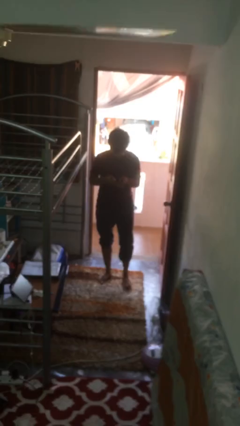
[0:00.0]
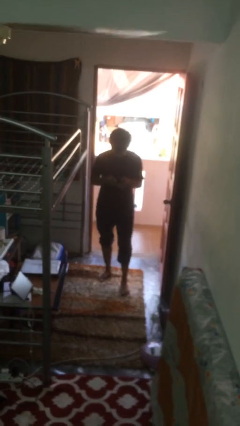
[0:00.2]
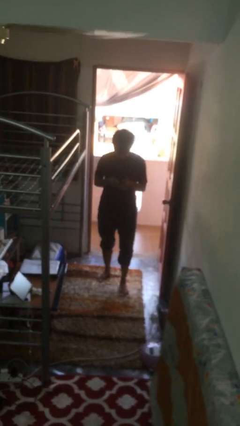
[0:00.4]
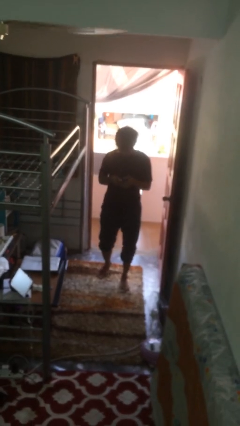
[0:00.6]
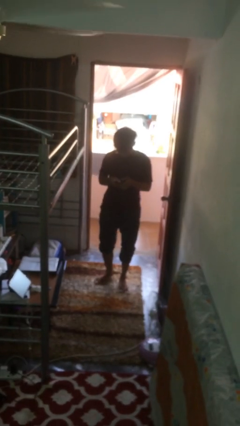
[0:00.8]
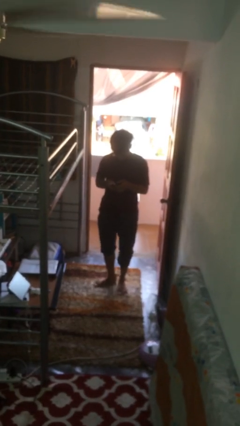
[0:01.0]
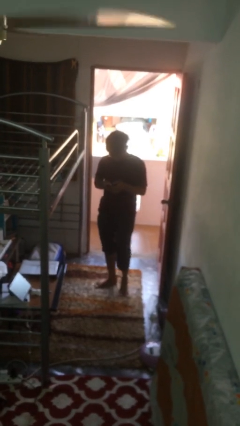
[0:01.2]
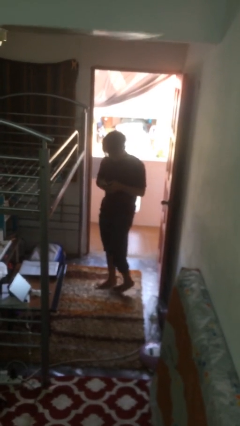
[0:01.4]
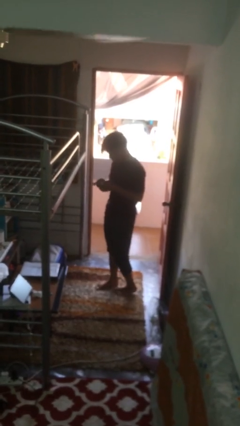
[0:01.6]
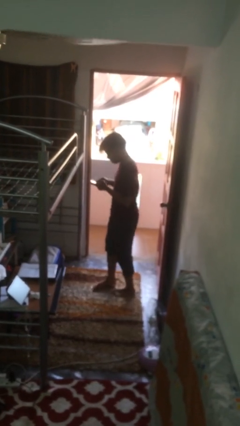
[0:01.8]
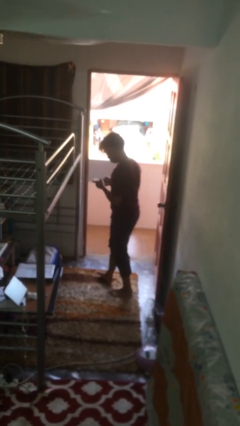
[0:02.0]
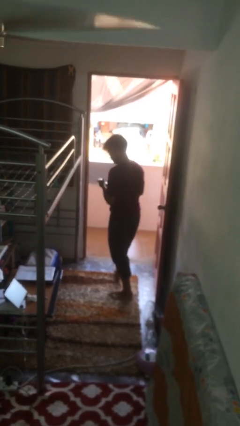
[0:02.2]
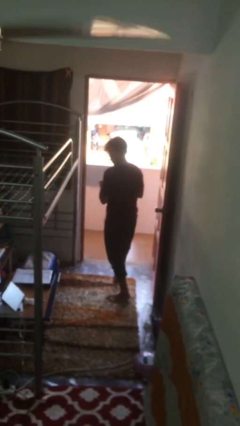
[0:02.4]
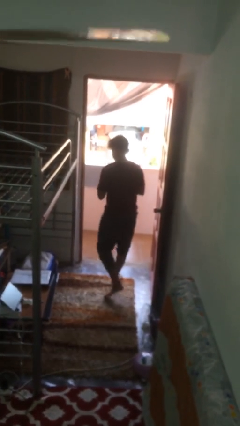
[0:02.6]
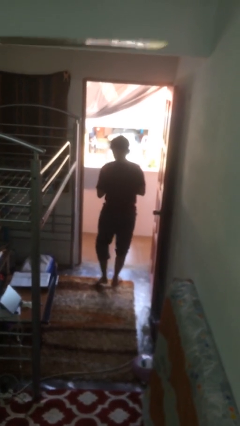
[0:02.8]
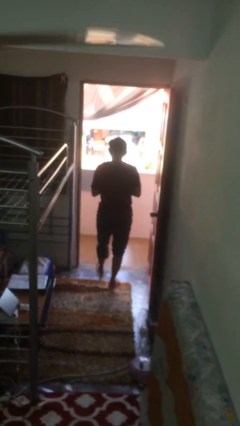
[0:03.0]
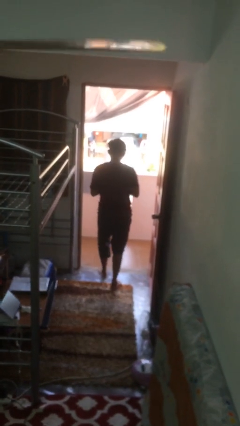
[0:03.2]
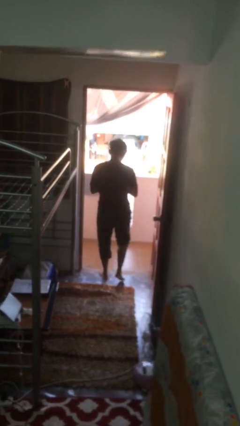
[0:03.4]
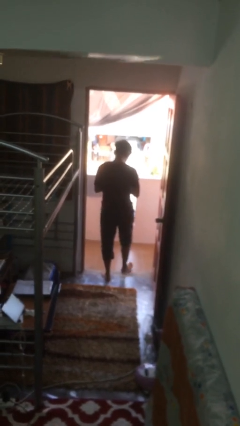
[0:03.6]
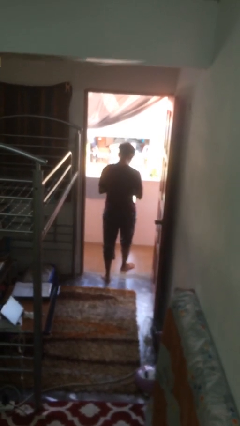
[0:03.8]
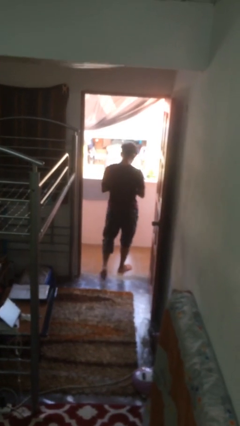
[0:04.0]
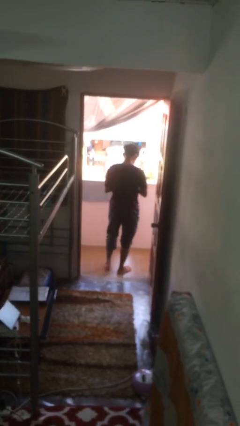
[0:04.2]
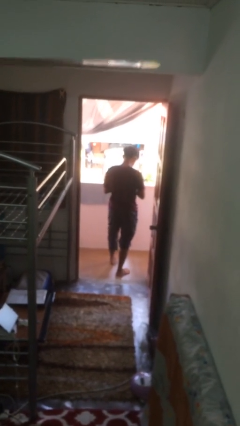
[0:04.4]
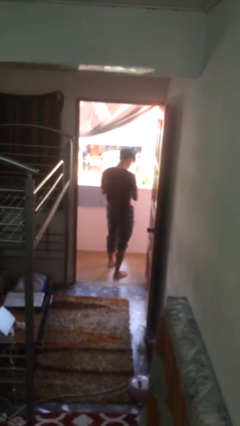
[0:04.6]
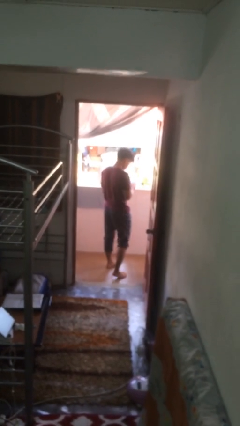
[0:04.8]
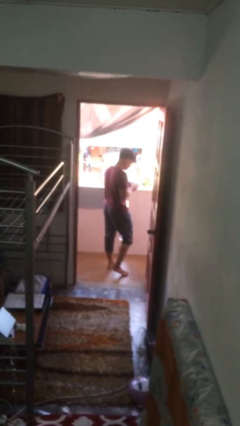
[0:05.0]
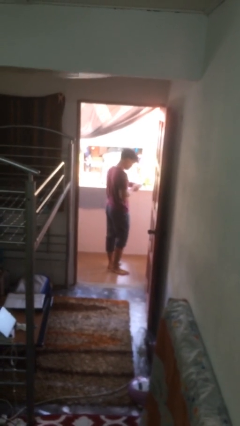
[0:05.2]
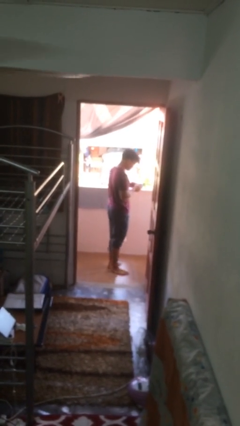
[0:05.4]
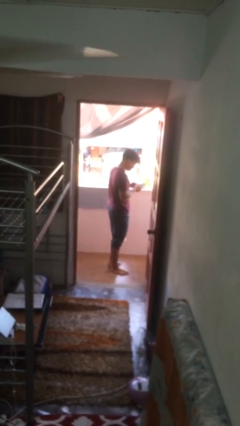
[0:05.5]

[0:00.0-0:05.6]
person exits scene through structure

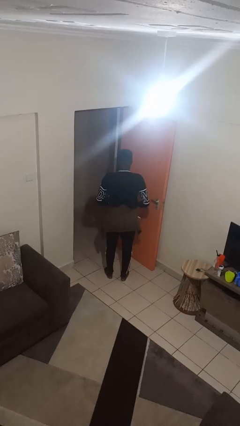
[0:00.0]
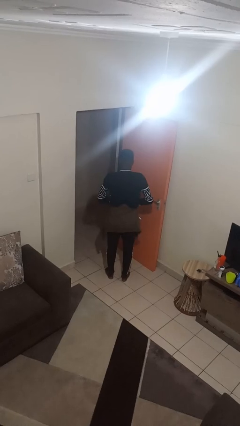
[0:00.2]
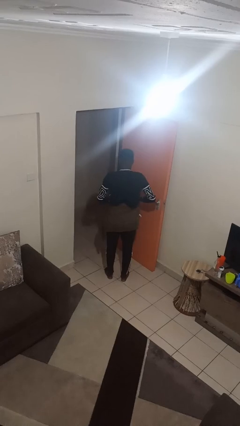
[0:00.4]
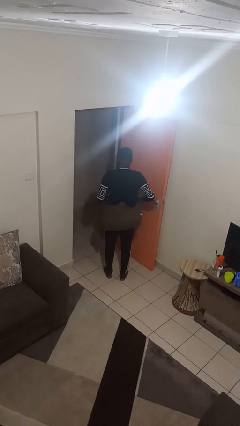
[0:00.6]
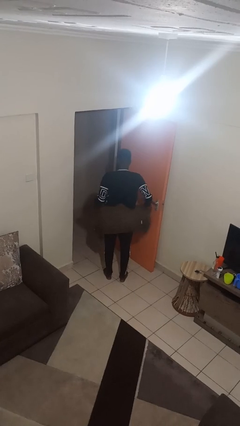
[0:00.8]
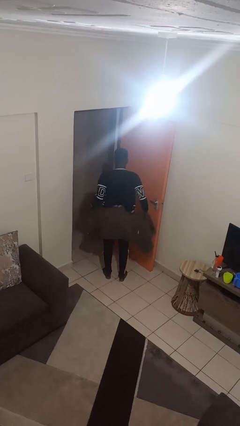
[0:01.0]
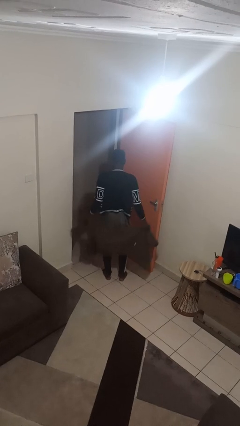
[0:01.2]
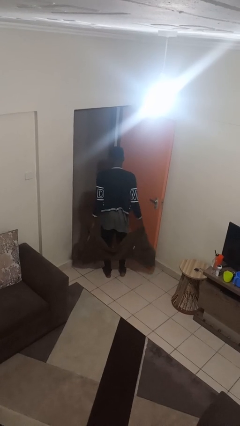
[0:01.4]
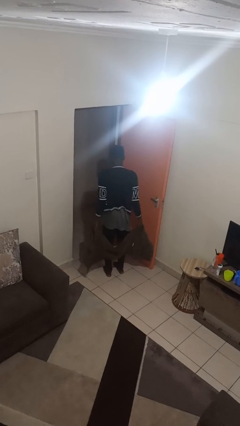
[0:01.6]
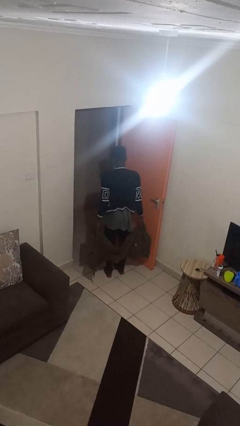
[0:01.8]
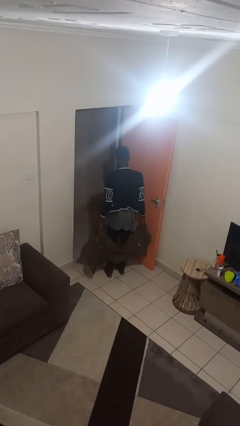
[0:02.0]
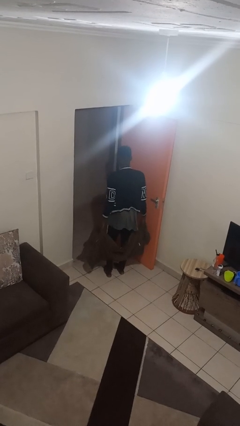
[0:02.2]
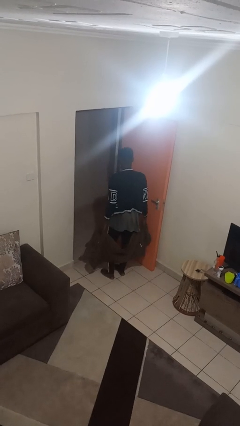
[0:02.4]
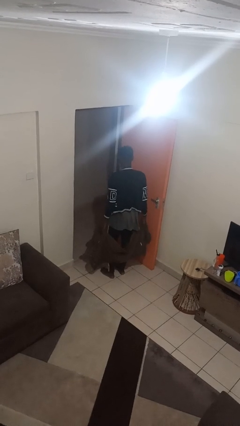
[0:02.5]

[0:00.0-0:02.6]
person unties jacket around waist

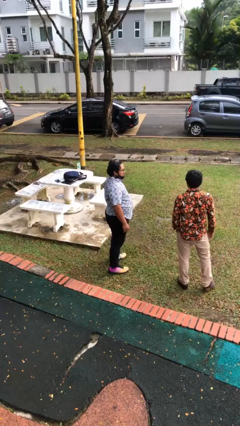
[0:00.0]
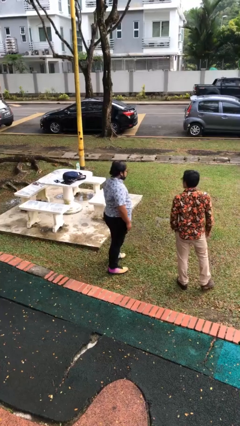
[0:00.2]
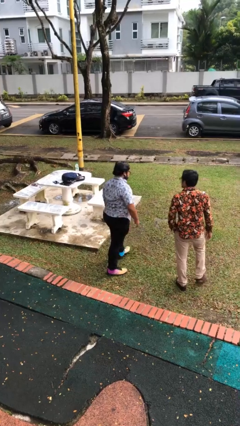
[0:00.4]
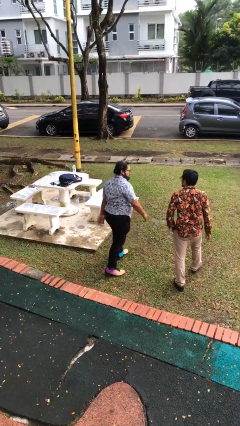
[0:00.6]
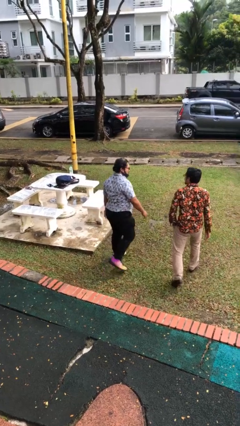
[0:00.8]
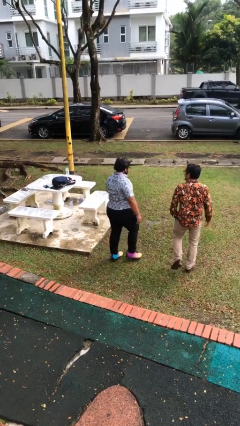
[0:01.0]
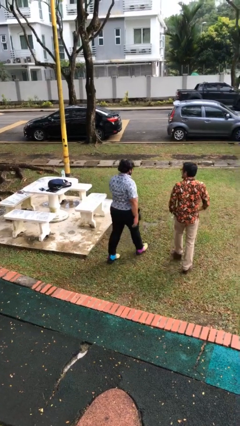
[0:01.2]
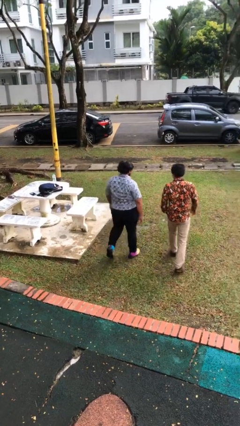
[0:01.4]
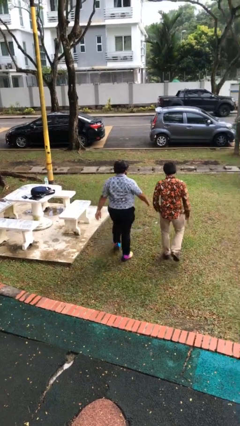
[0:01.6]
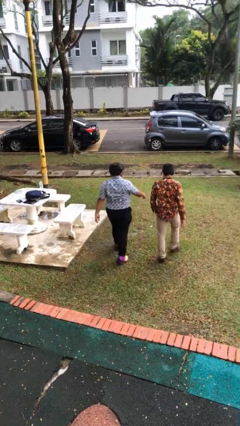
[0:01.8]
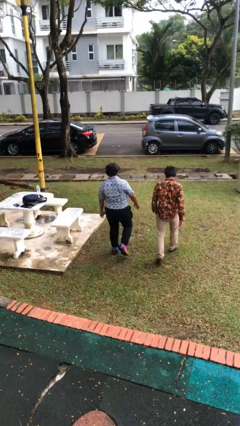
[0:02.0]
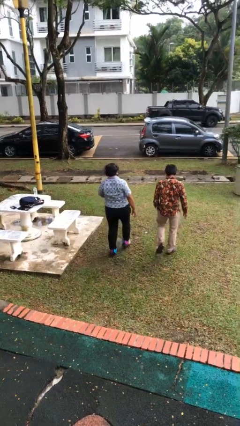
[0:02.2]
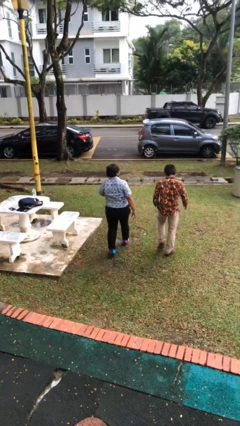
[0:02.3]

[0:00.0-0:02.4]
person talks to person

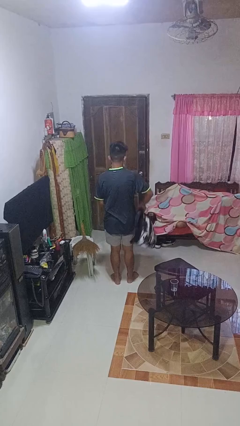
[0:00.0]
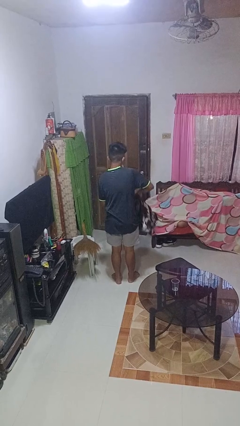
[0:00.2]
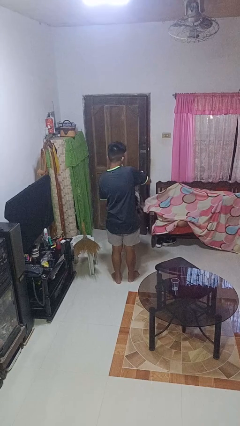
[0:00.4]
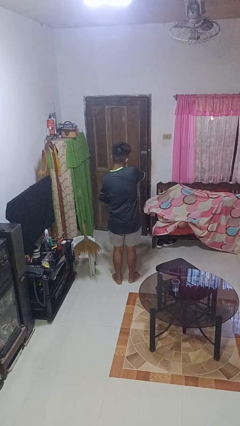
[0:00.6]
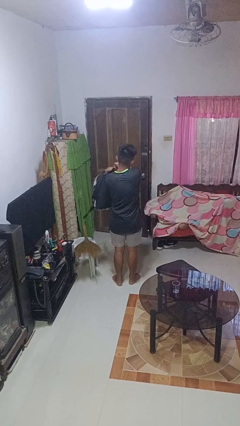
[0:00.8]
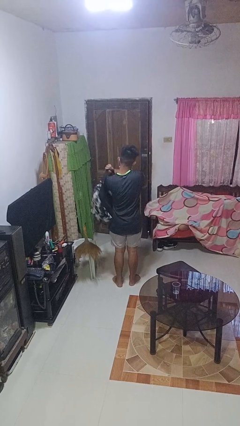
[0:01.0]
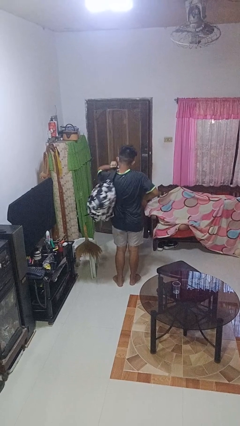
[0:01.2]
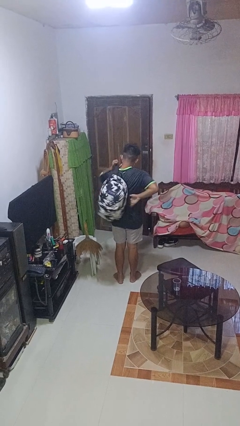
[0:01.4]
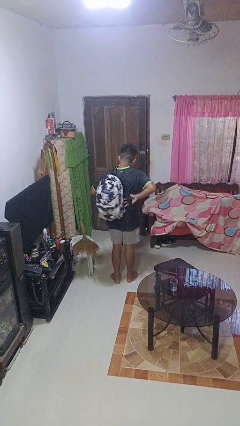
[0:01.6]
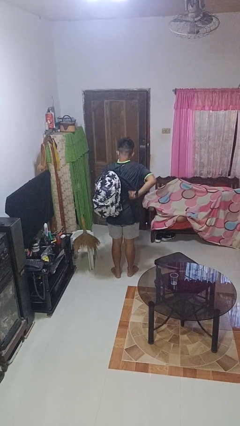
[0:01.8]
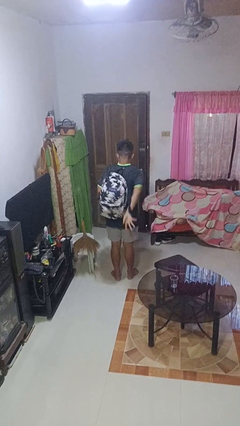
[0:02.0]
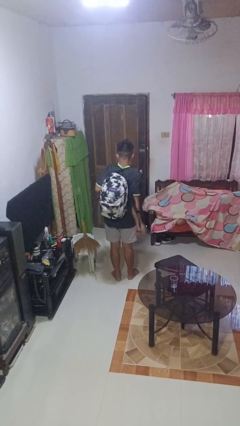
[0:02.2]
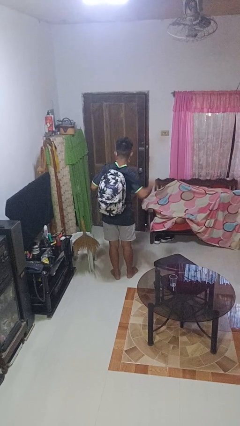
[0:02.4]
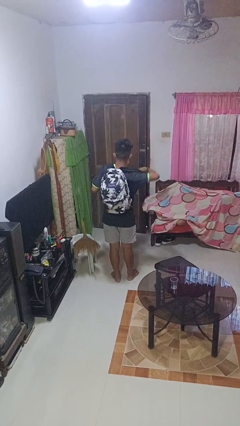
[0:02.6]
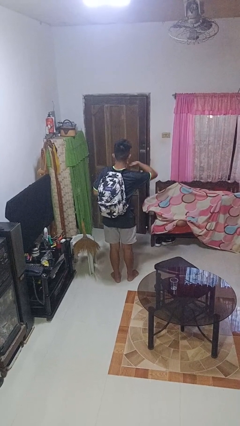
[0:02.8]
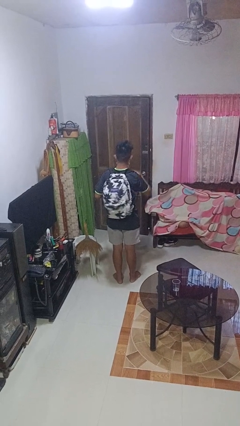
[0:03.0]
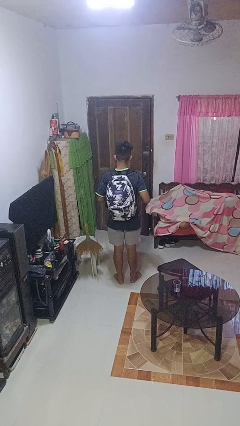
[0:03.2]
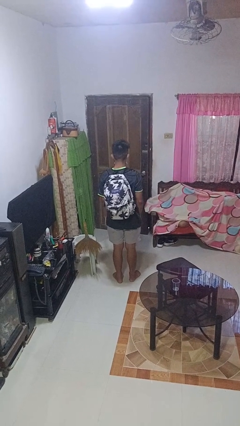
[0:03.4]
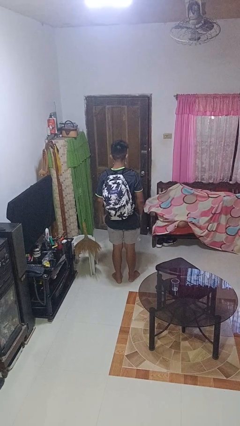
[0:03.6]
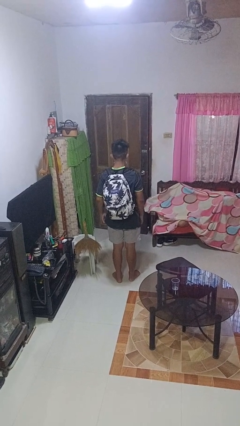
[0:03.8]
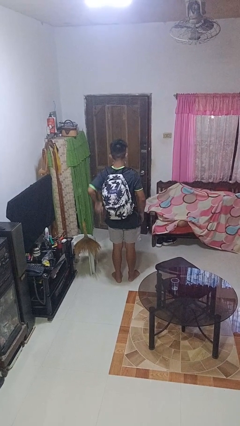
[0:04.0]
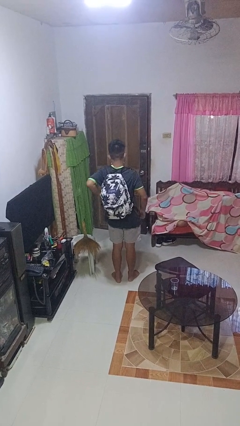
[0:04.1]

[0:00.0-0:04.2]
person puts on backpack

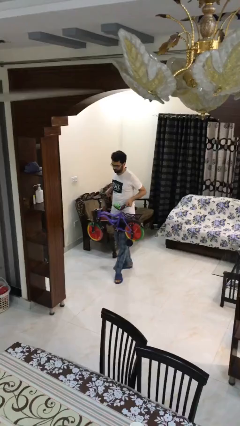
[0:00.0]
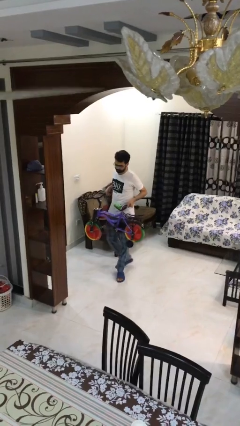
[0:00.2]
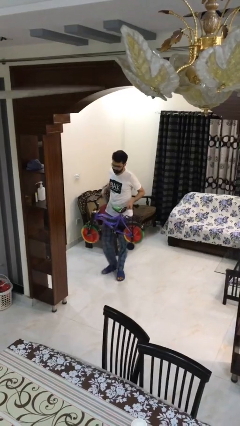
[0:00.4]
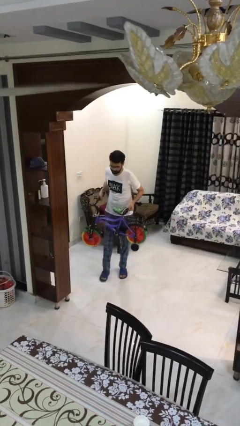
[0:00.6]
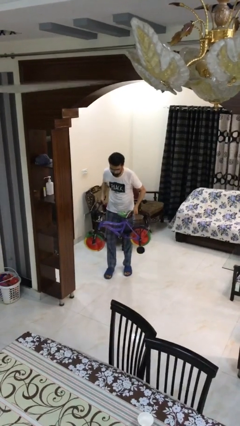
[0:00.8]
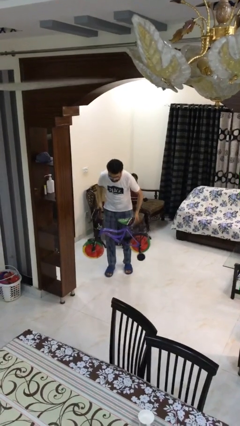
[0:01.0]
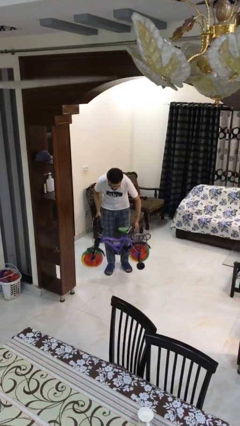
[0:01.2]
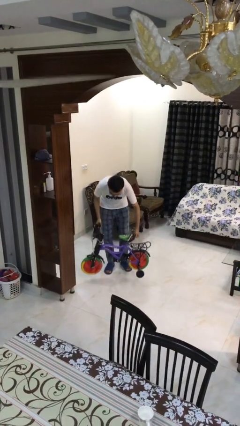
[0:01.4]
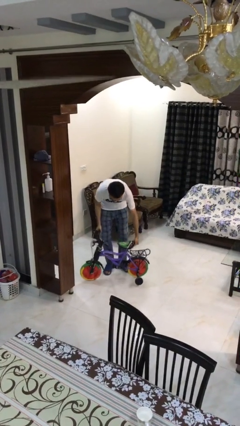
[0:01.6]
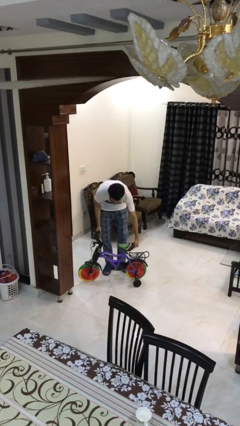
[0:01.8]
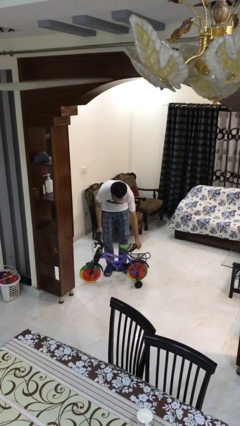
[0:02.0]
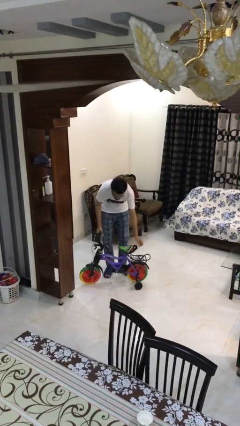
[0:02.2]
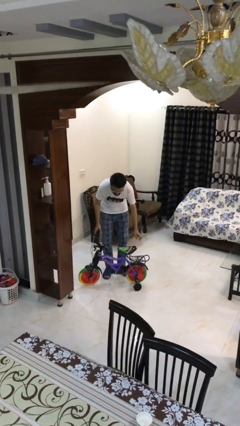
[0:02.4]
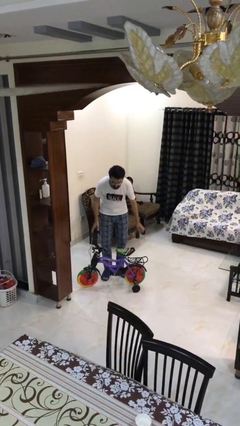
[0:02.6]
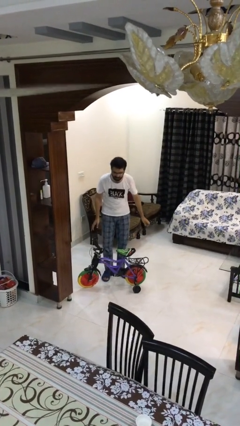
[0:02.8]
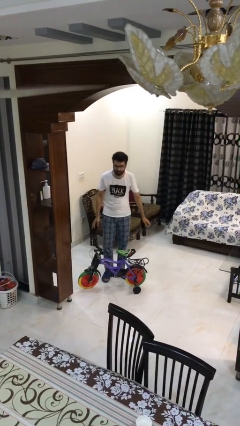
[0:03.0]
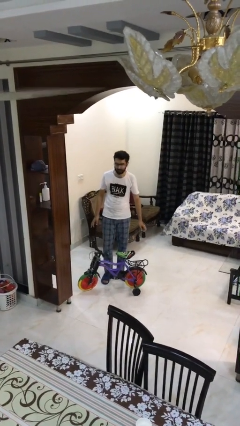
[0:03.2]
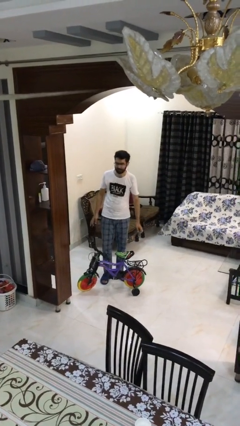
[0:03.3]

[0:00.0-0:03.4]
person puts down object on floor
